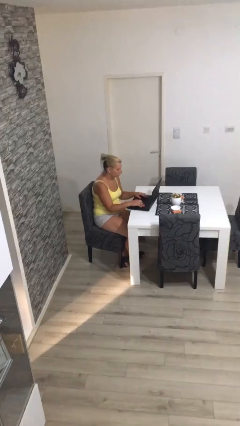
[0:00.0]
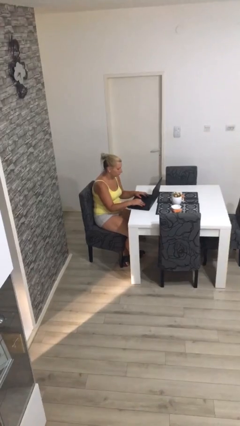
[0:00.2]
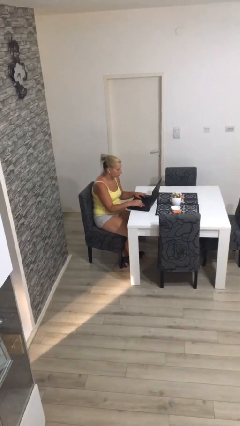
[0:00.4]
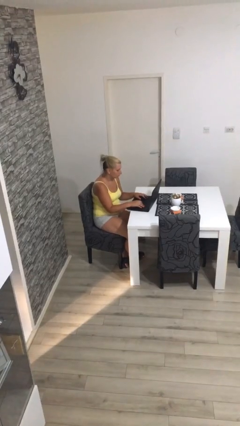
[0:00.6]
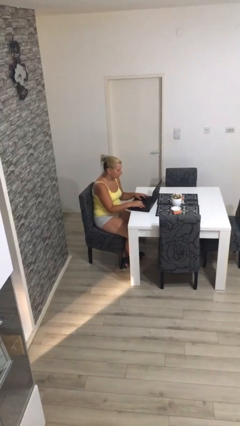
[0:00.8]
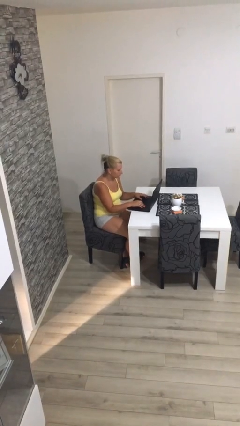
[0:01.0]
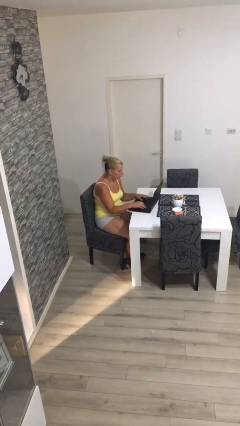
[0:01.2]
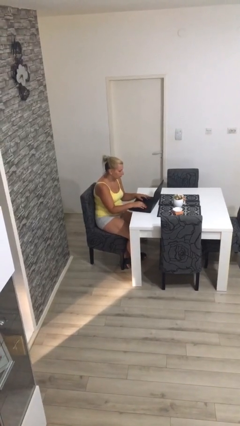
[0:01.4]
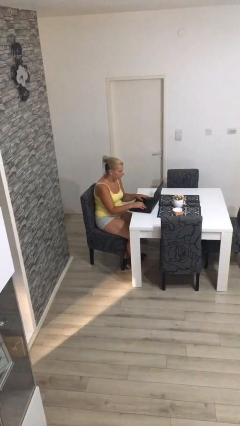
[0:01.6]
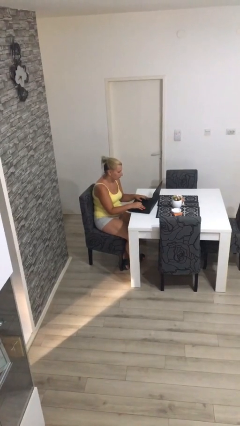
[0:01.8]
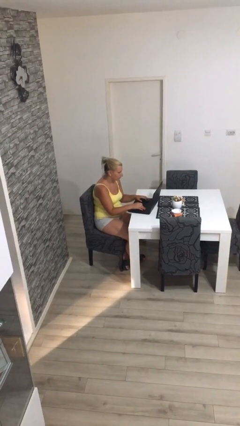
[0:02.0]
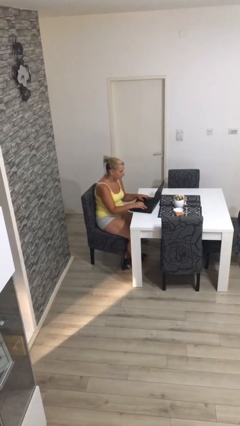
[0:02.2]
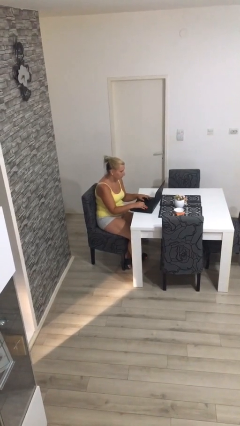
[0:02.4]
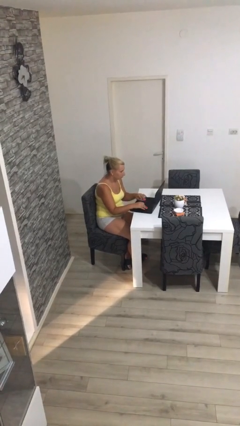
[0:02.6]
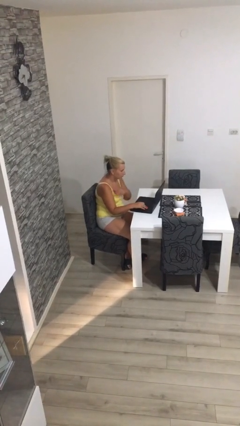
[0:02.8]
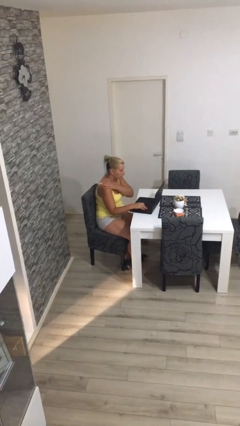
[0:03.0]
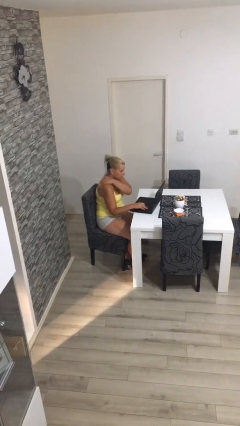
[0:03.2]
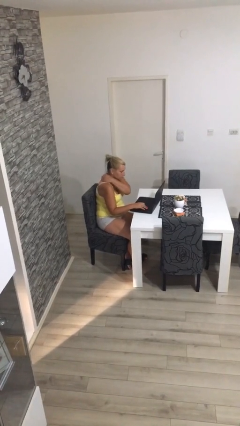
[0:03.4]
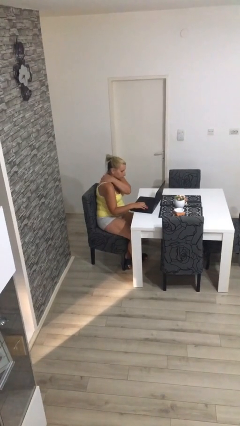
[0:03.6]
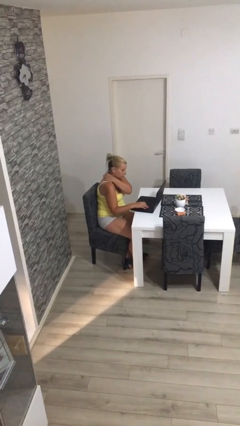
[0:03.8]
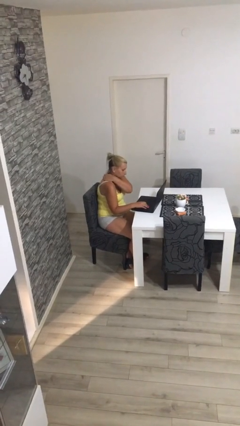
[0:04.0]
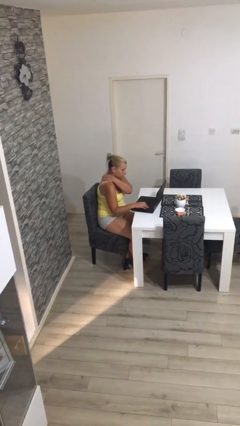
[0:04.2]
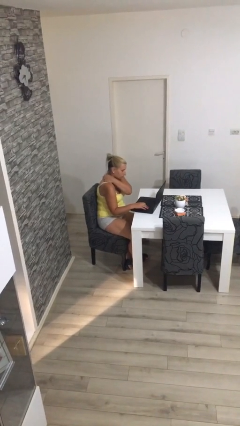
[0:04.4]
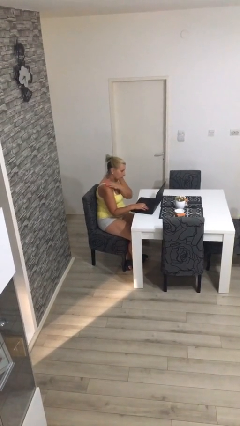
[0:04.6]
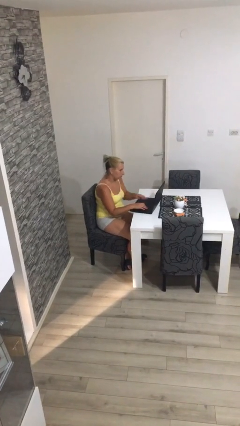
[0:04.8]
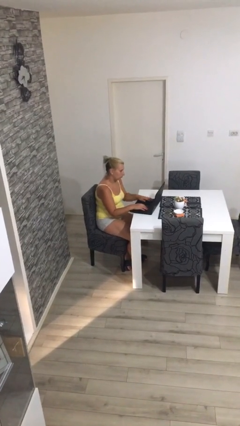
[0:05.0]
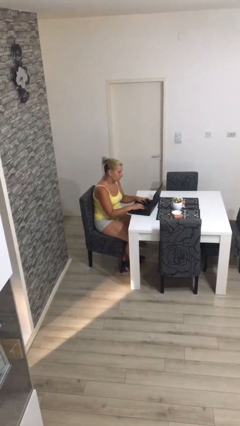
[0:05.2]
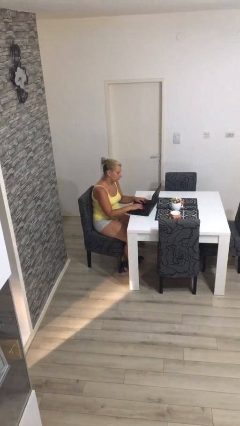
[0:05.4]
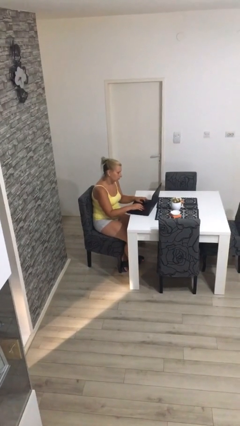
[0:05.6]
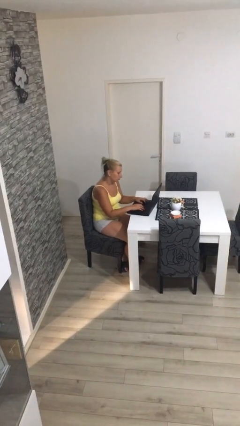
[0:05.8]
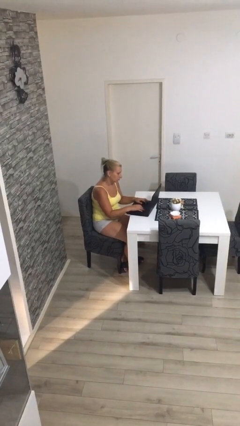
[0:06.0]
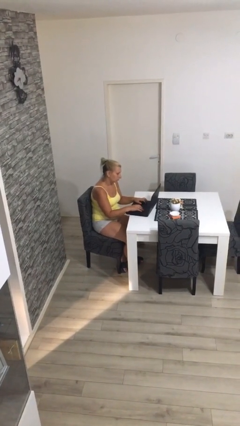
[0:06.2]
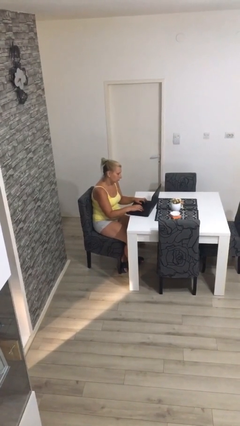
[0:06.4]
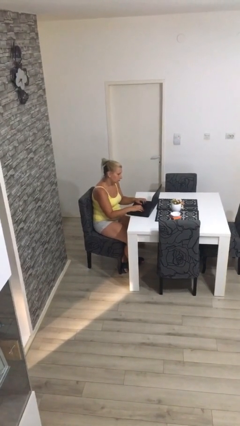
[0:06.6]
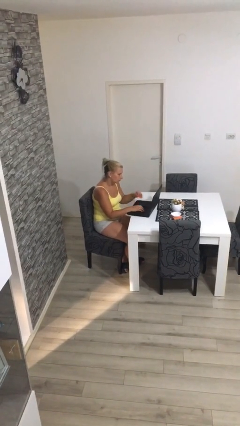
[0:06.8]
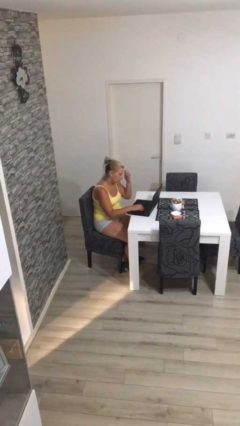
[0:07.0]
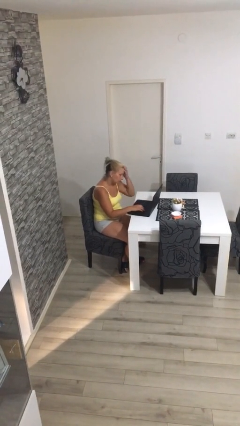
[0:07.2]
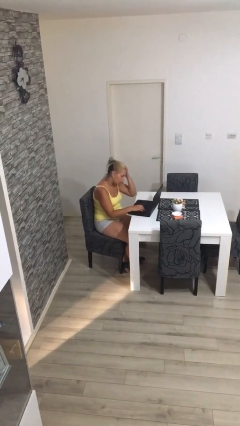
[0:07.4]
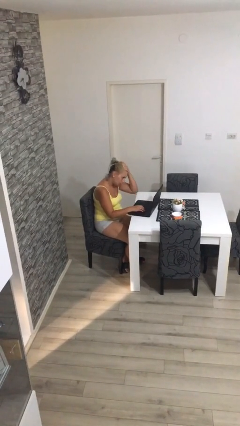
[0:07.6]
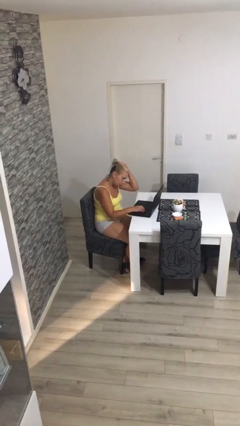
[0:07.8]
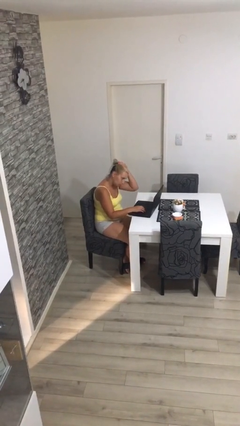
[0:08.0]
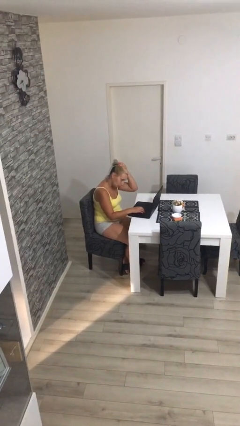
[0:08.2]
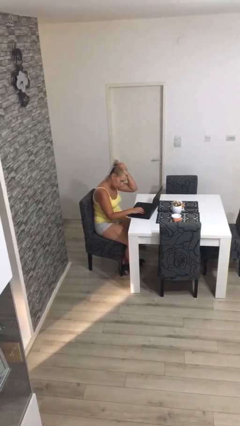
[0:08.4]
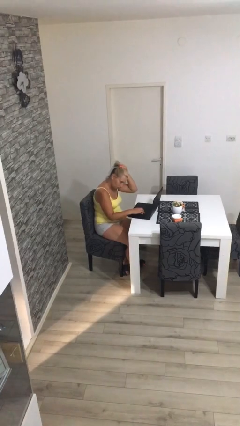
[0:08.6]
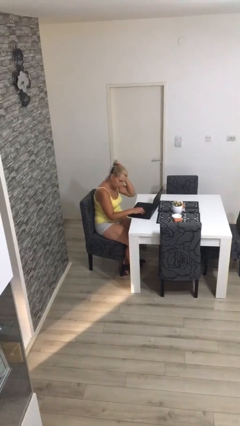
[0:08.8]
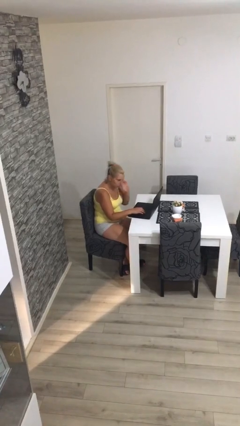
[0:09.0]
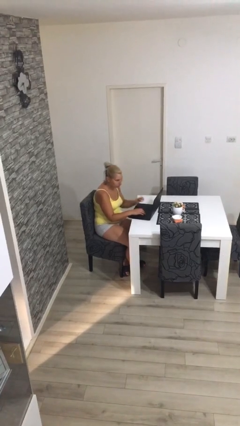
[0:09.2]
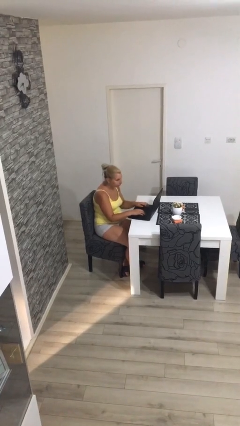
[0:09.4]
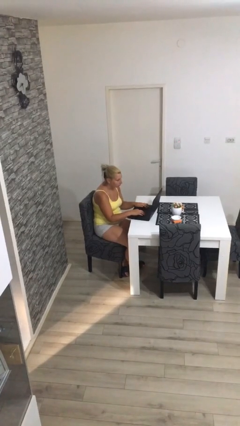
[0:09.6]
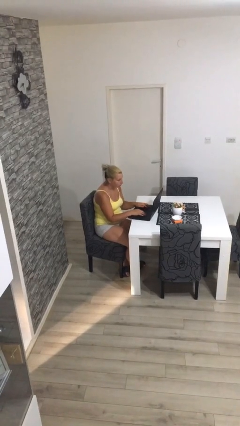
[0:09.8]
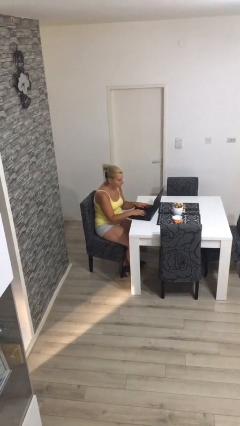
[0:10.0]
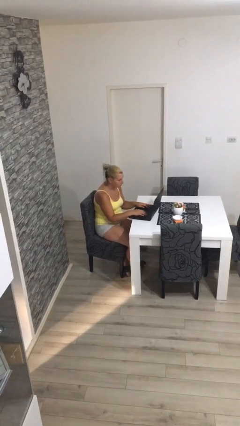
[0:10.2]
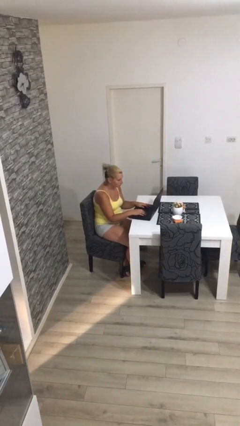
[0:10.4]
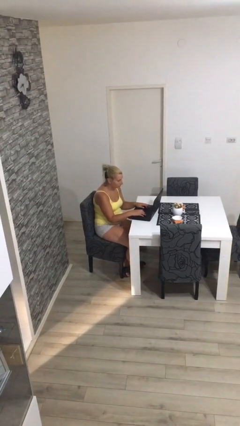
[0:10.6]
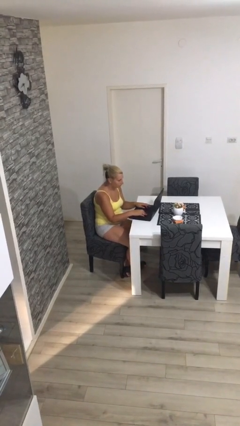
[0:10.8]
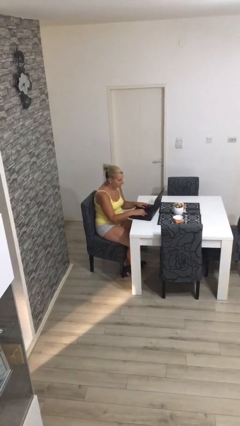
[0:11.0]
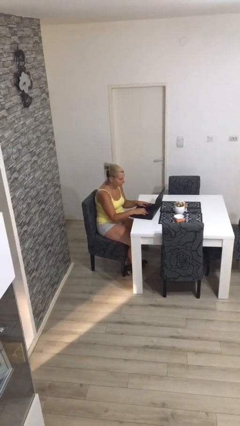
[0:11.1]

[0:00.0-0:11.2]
person interacts with laptop

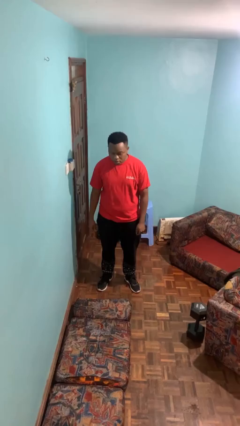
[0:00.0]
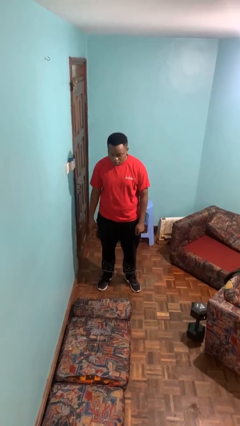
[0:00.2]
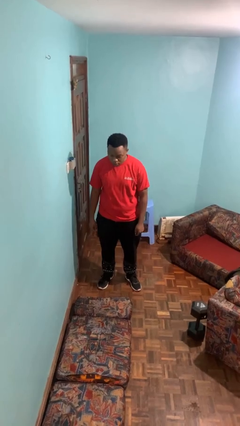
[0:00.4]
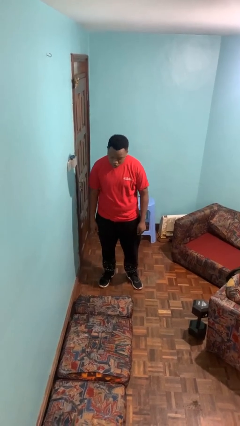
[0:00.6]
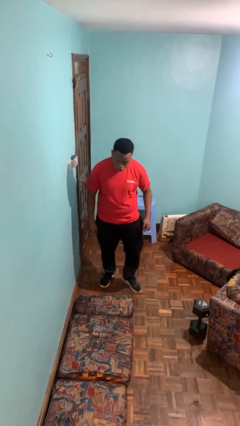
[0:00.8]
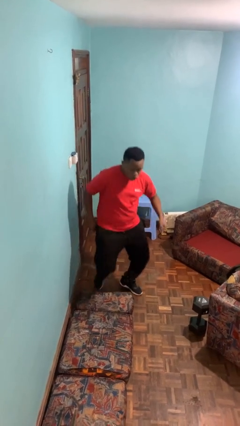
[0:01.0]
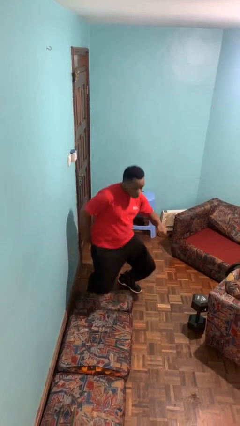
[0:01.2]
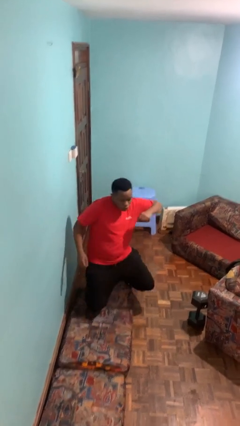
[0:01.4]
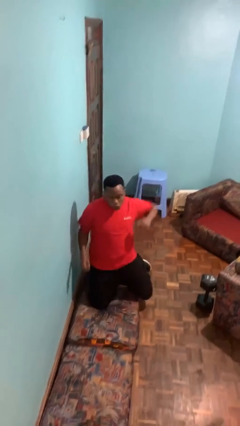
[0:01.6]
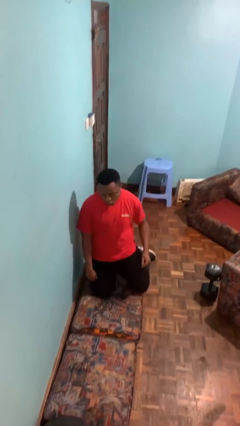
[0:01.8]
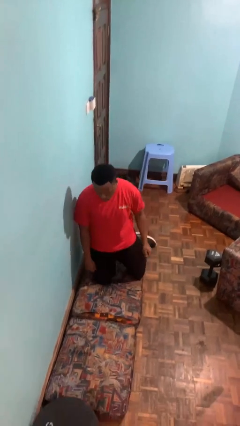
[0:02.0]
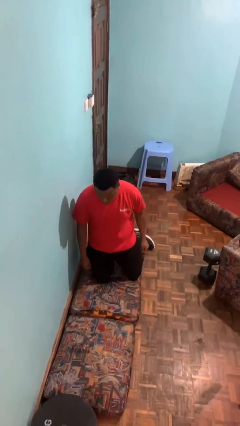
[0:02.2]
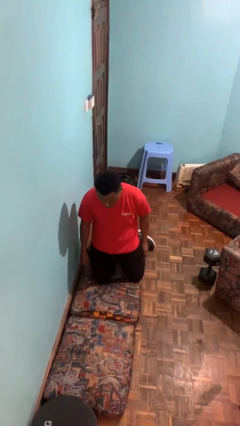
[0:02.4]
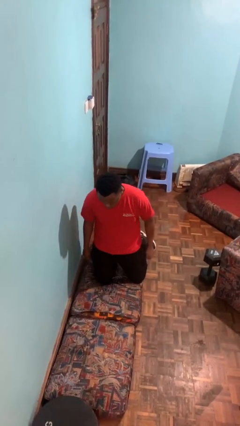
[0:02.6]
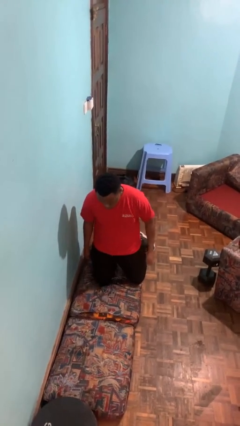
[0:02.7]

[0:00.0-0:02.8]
person trips on object on floor

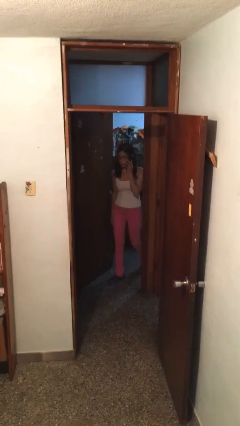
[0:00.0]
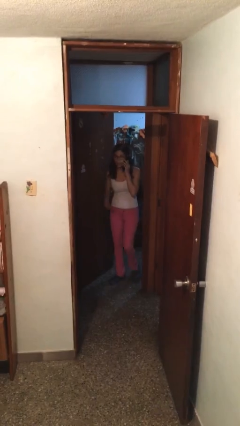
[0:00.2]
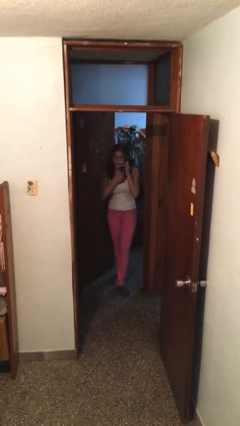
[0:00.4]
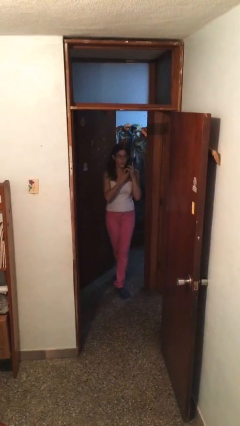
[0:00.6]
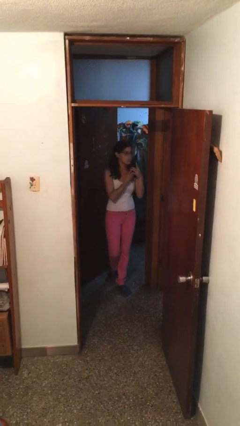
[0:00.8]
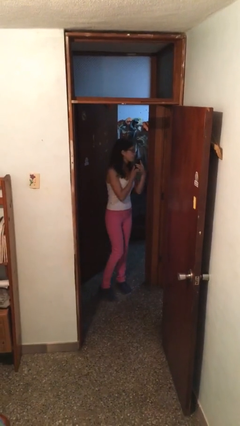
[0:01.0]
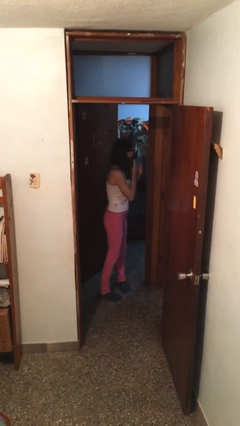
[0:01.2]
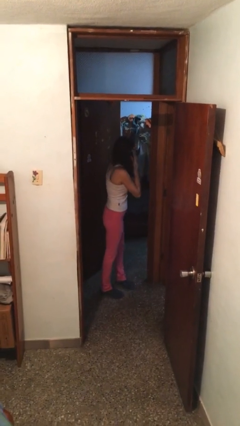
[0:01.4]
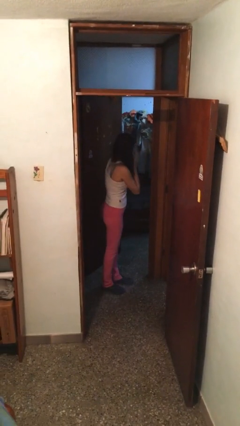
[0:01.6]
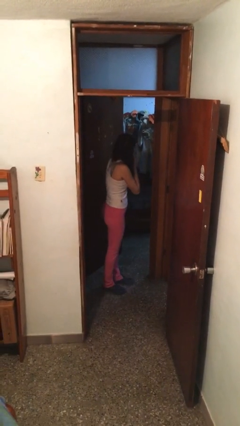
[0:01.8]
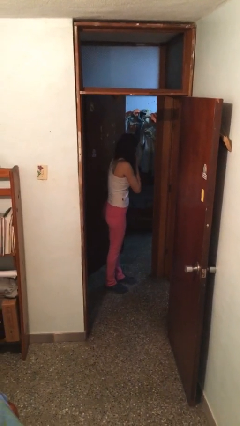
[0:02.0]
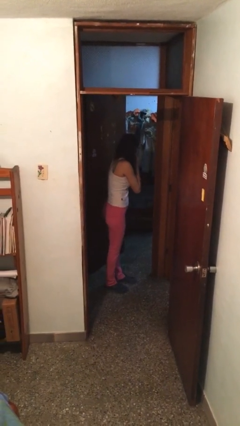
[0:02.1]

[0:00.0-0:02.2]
person enters scene through structure

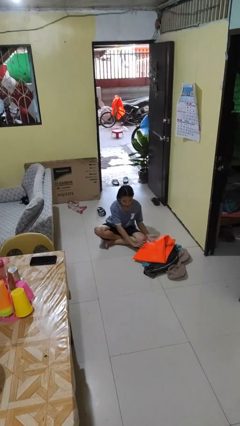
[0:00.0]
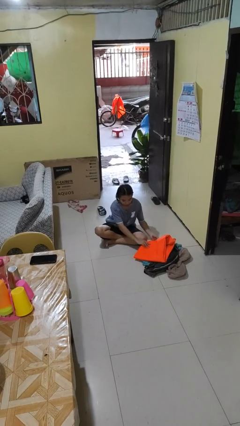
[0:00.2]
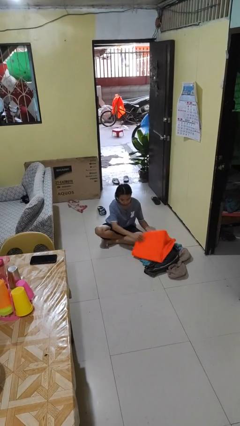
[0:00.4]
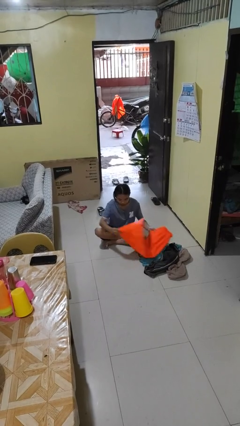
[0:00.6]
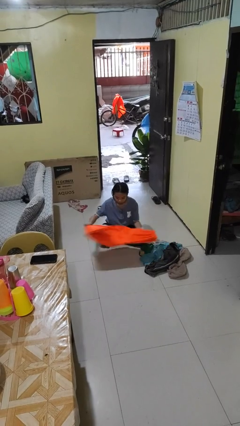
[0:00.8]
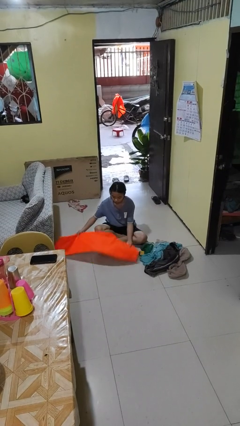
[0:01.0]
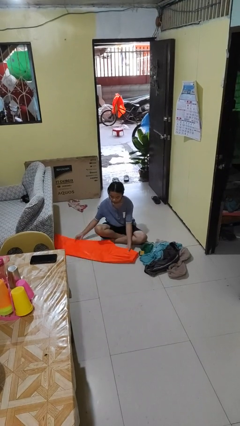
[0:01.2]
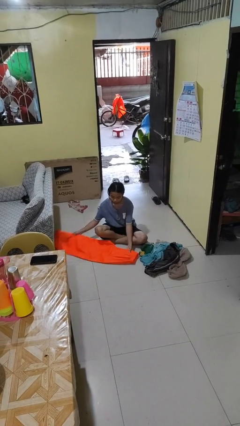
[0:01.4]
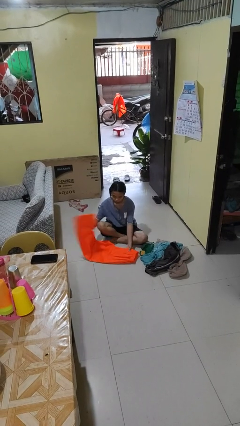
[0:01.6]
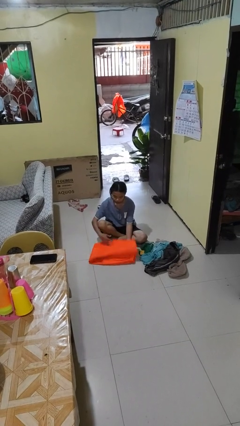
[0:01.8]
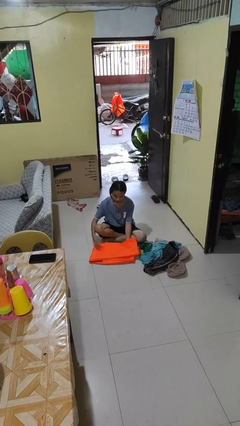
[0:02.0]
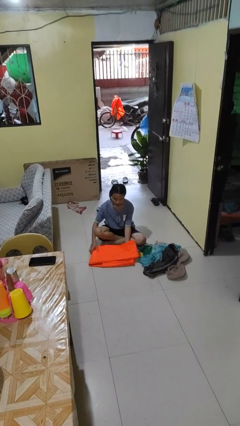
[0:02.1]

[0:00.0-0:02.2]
person folds pants
